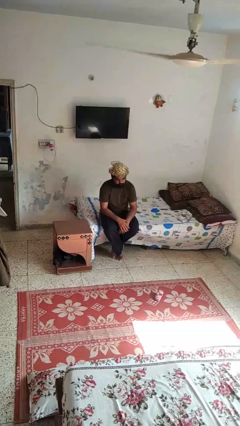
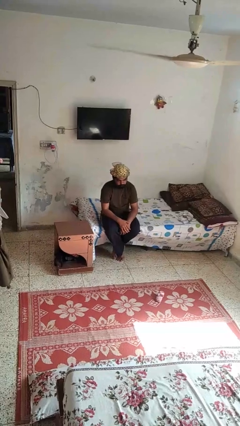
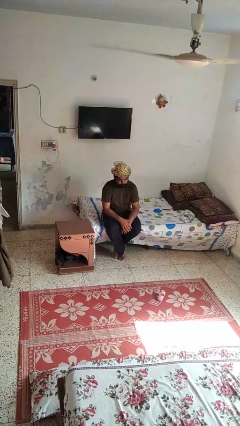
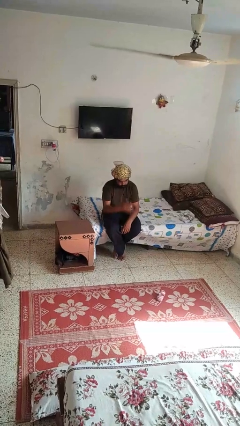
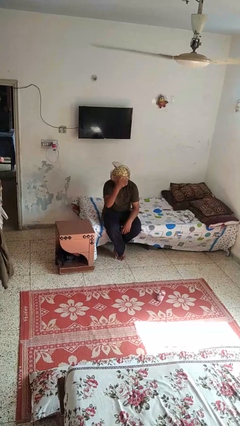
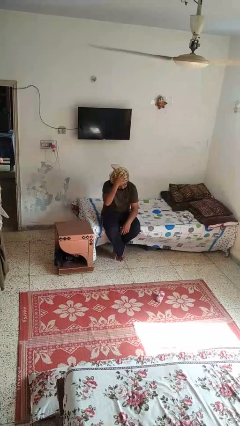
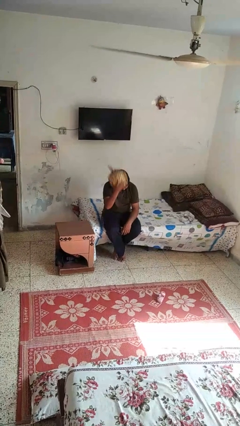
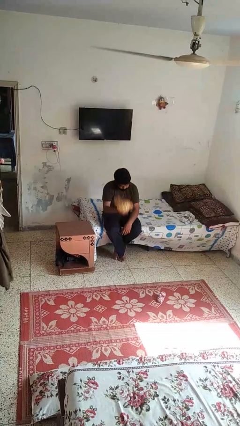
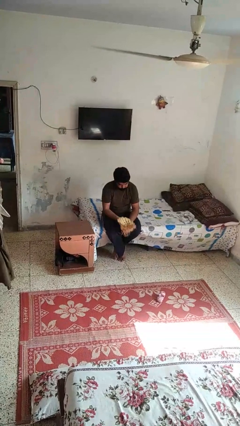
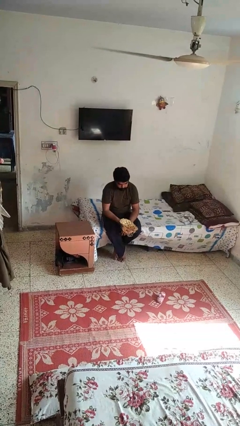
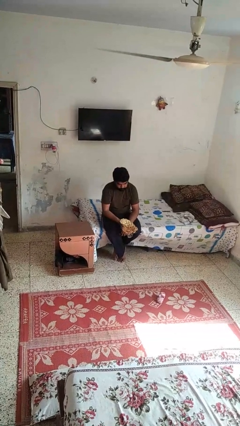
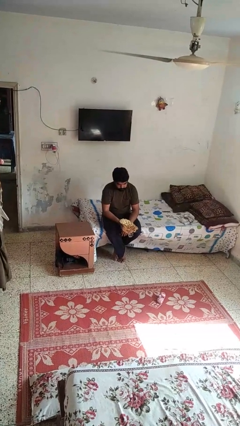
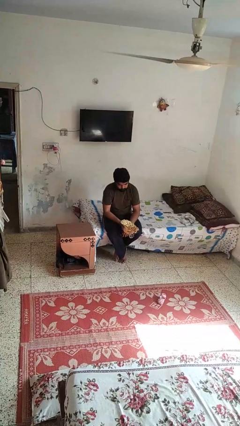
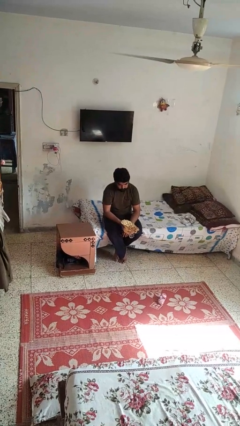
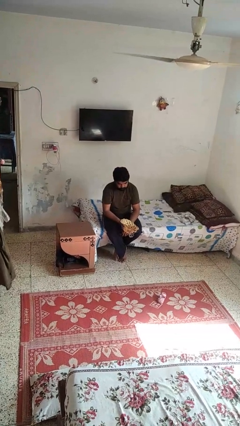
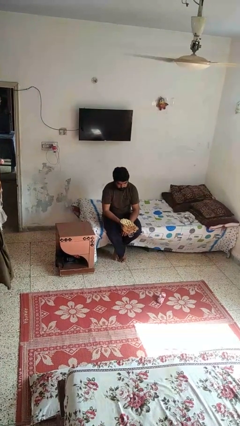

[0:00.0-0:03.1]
person takes off hat

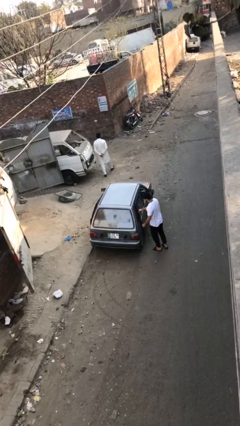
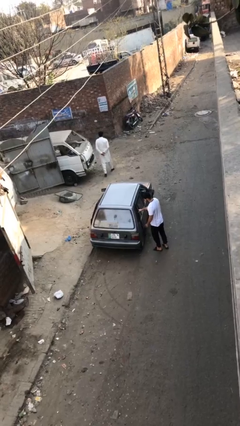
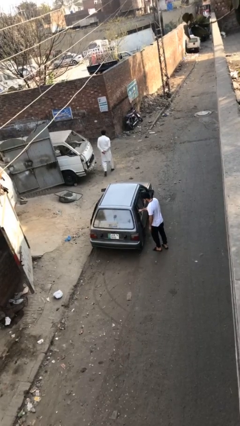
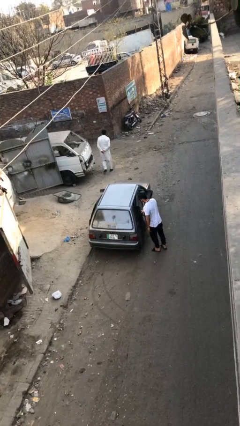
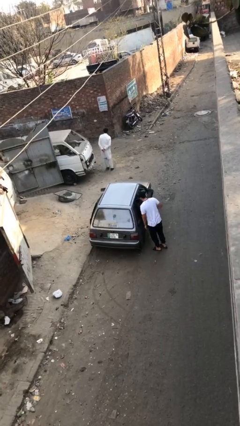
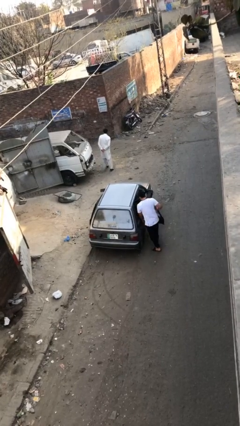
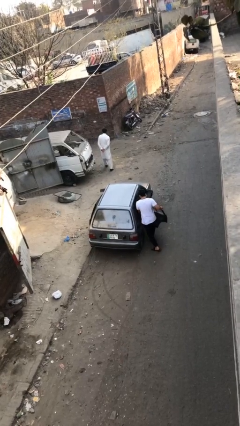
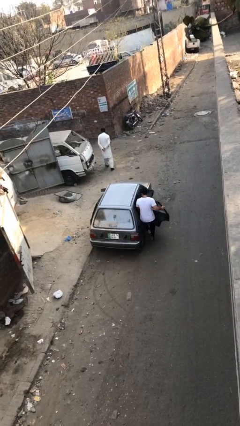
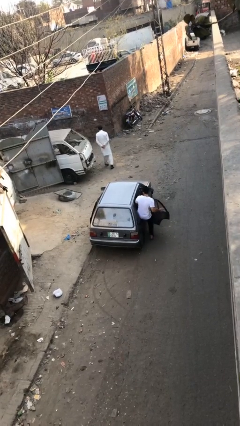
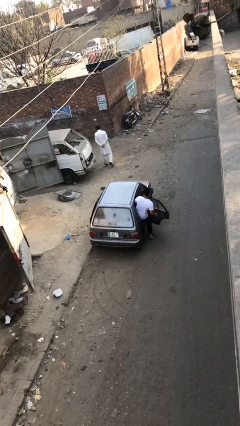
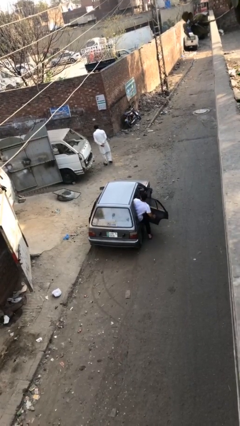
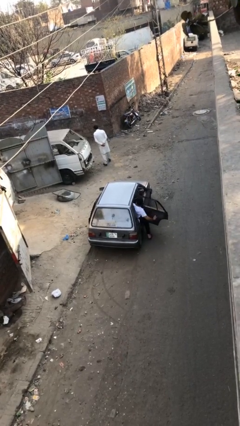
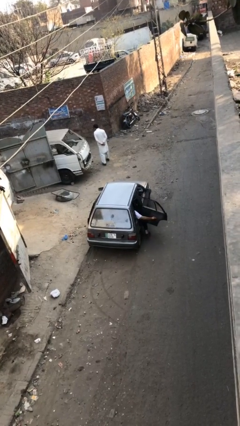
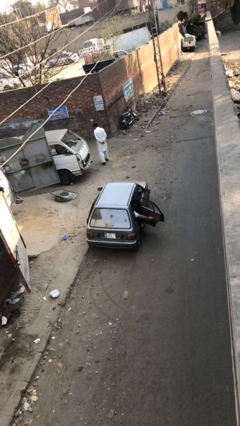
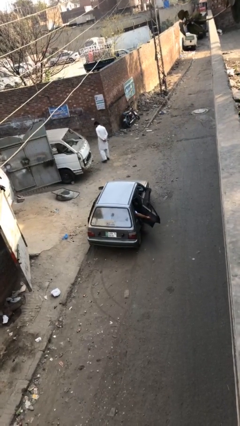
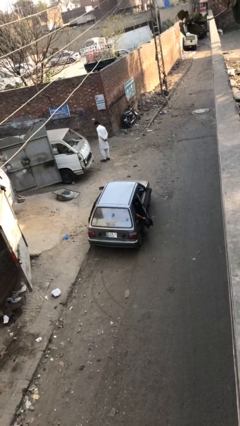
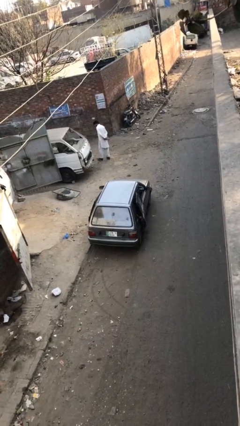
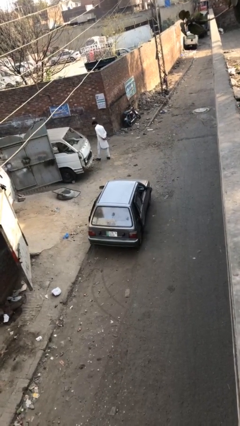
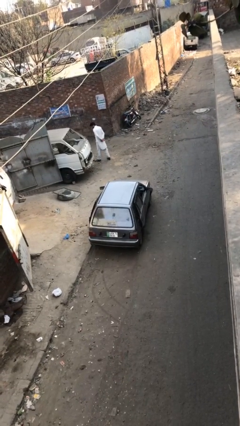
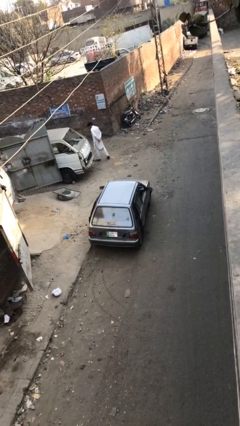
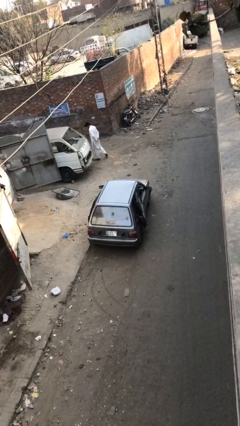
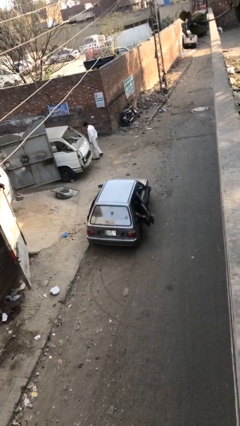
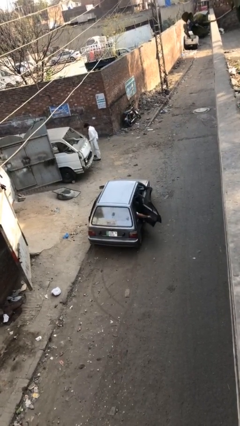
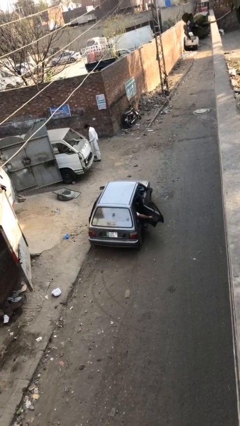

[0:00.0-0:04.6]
car picks up person

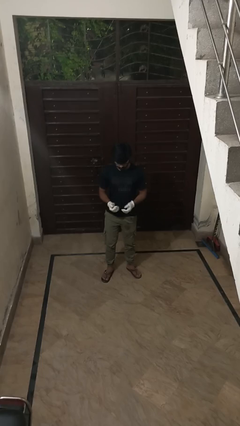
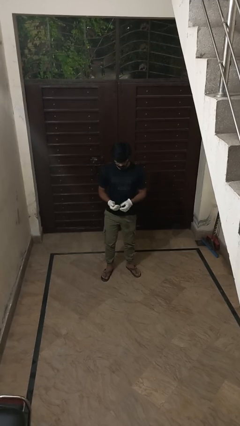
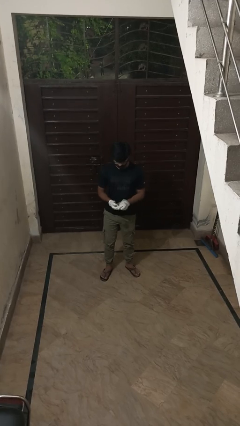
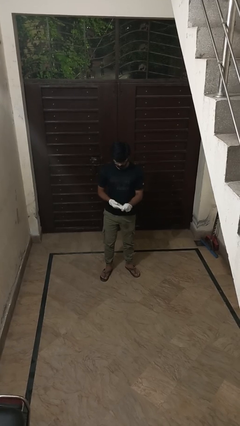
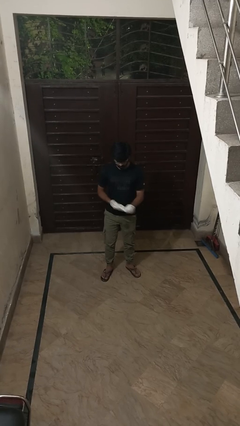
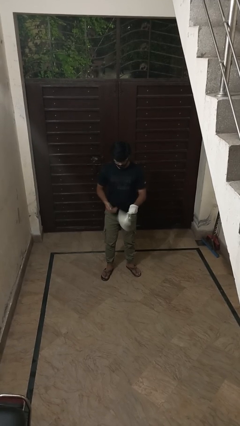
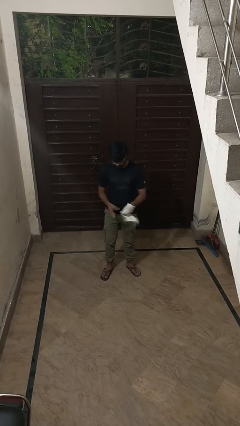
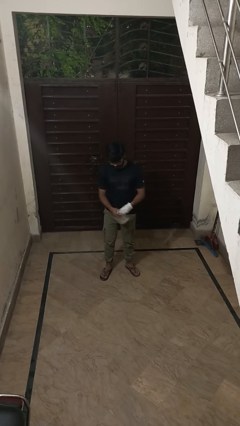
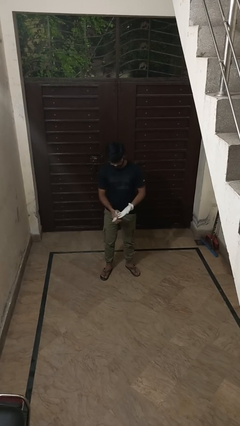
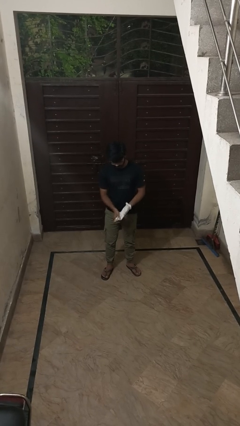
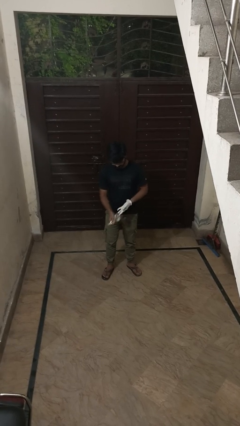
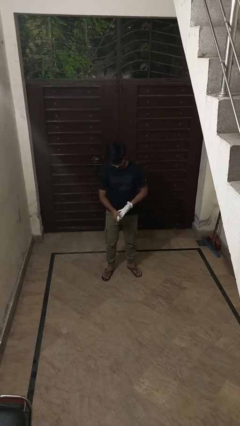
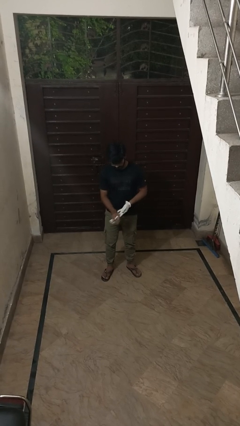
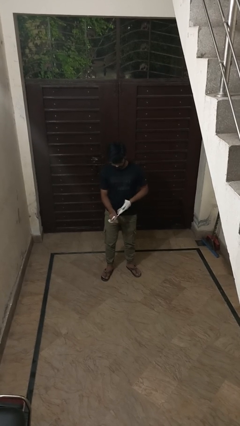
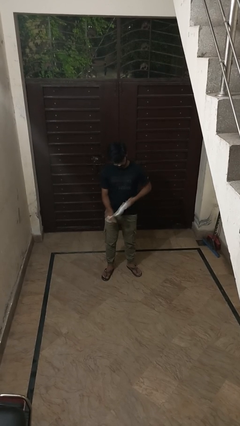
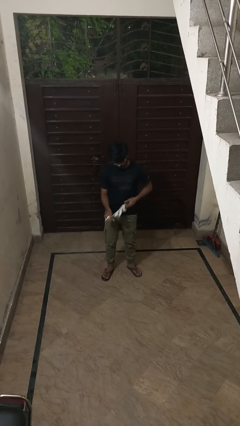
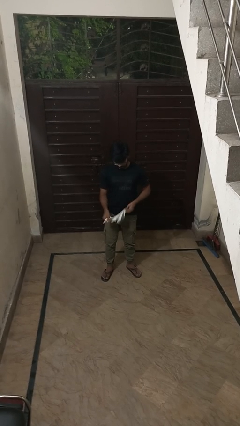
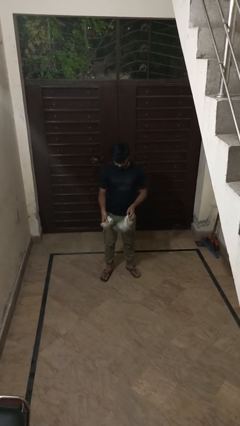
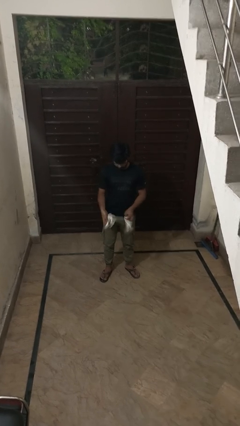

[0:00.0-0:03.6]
person takes off gloves

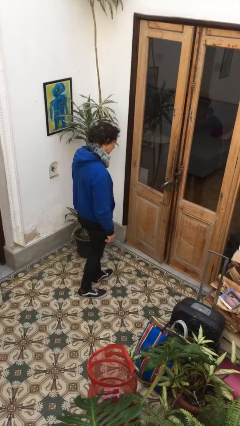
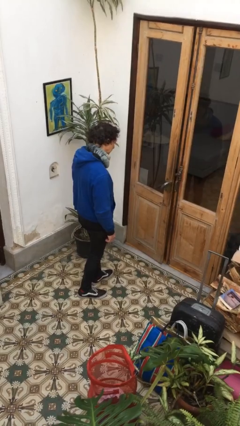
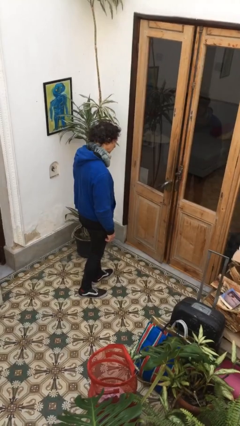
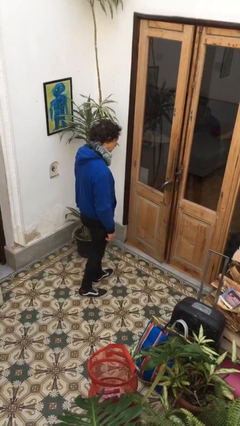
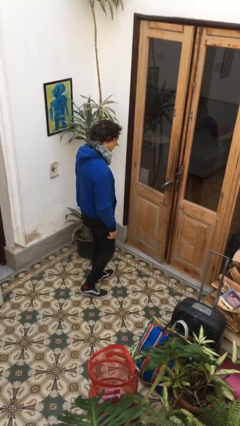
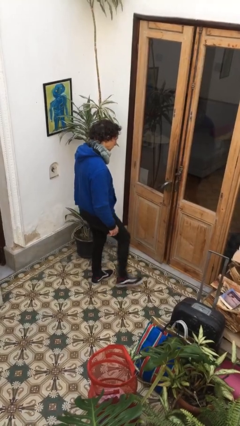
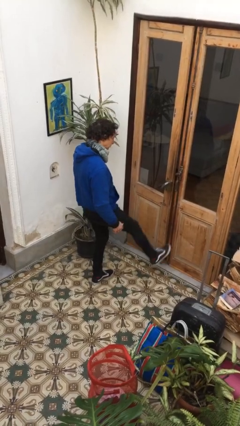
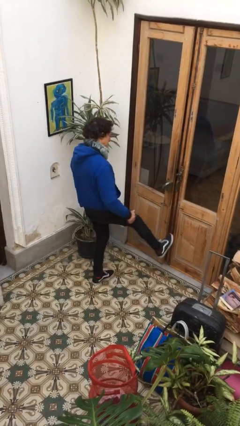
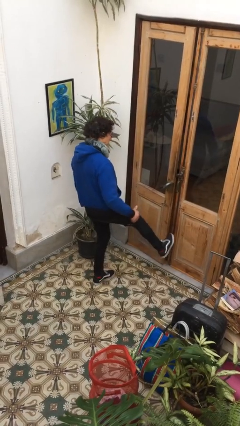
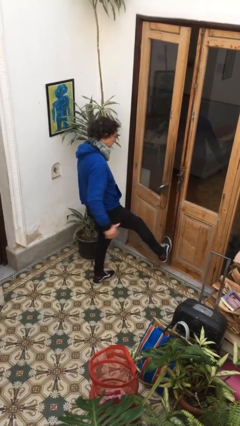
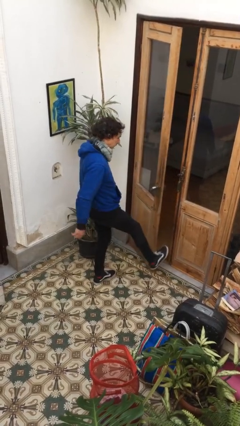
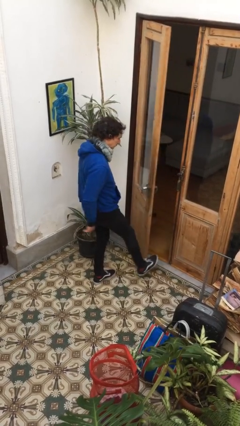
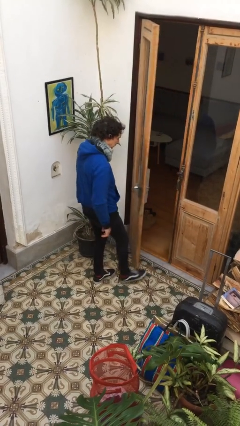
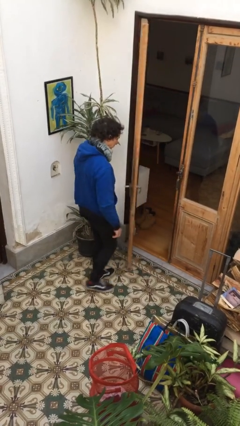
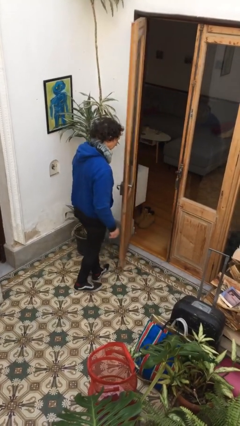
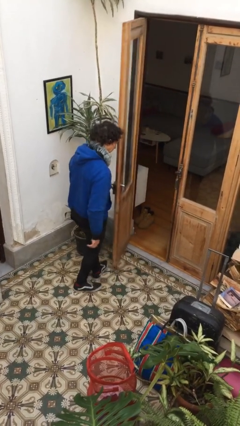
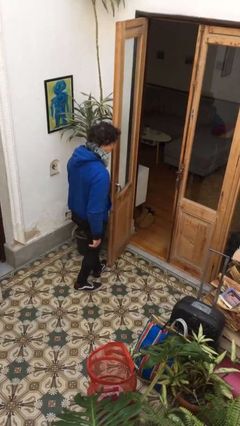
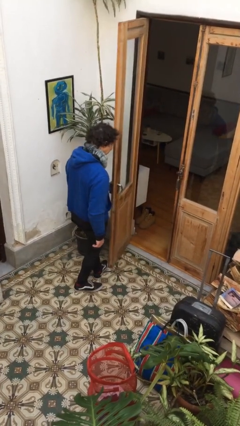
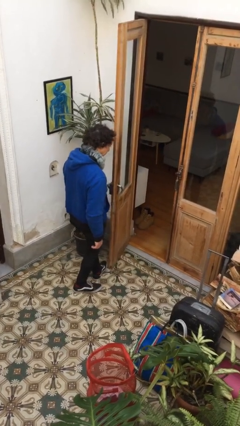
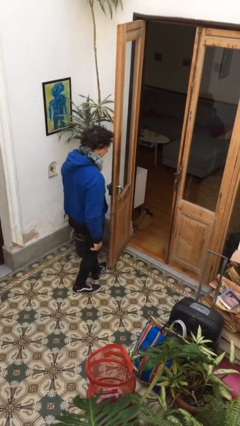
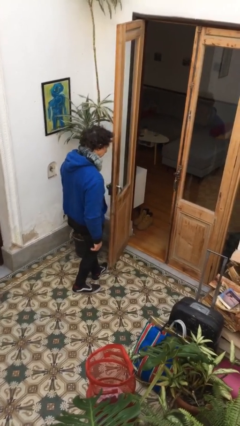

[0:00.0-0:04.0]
person opens facility door

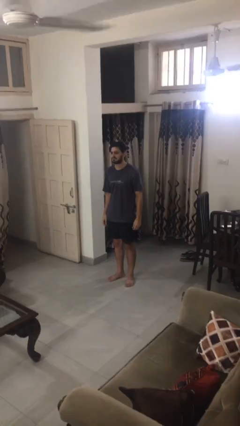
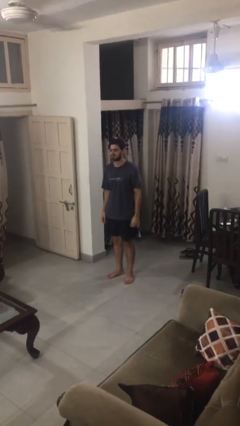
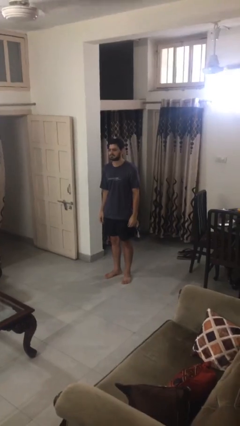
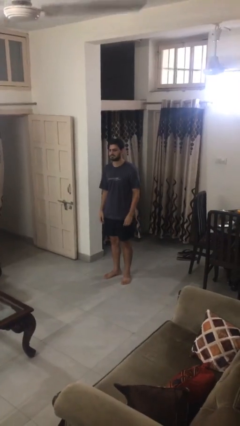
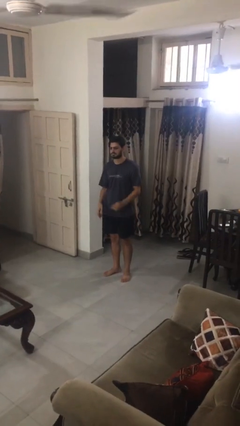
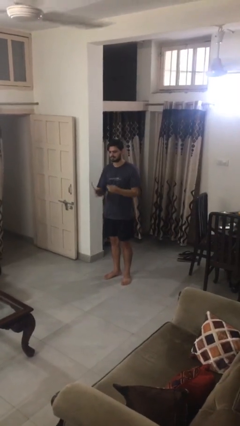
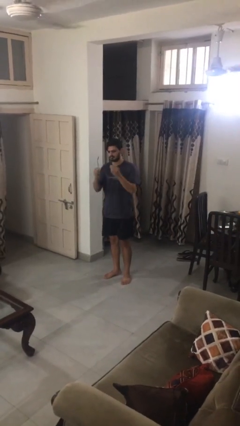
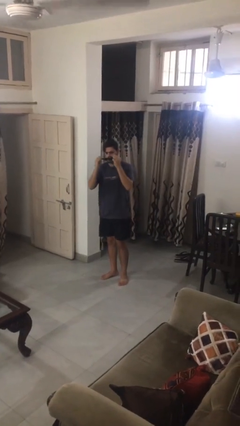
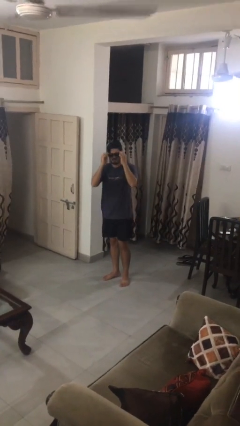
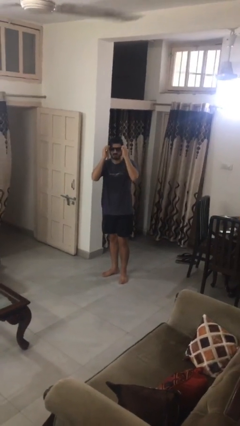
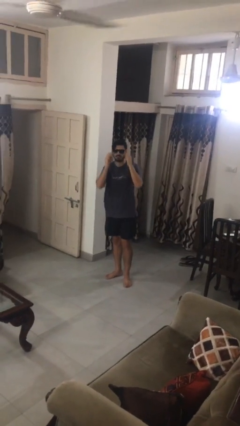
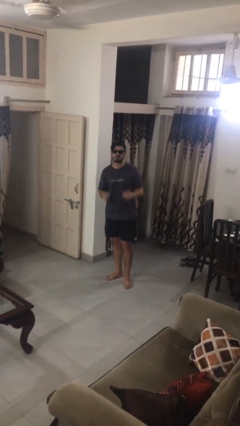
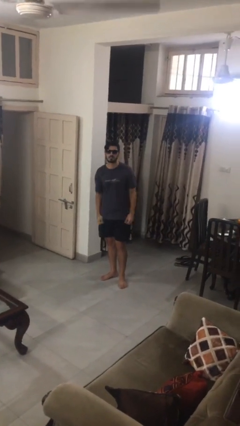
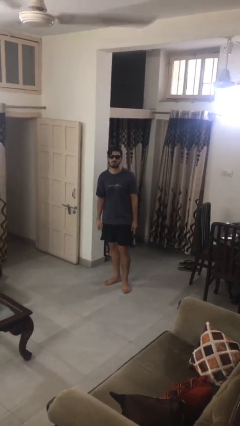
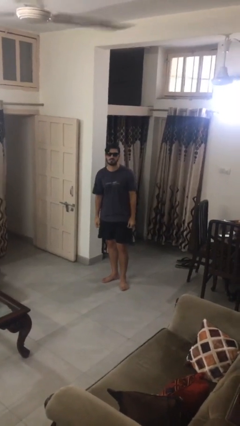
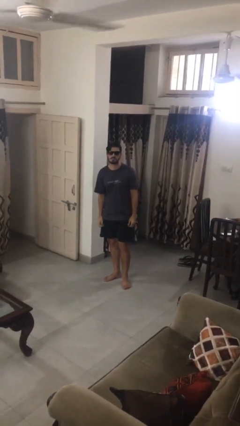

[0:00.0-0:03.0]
person puts on sunglasses
